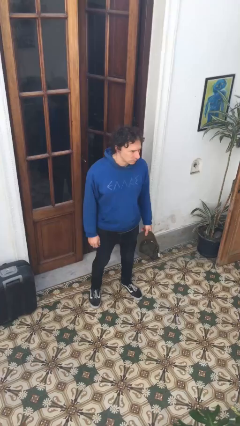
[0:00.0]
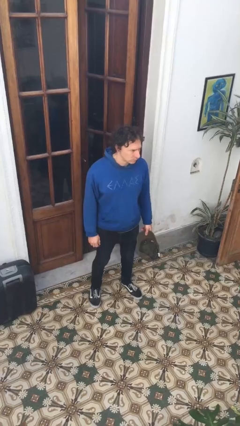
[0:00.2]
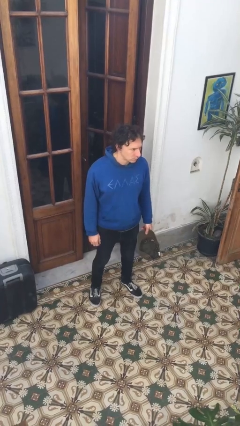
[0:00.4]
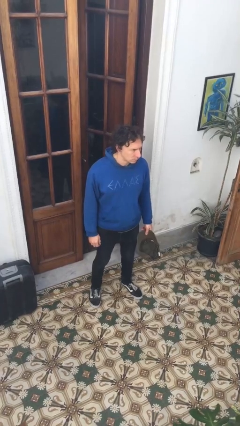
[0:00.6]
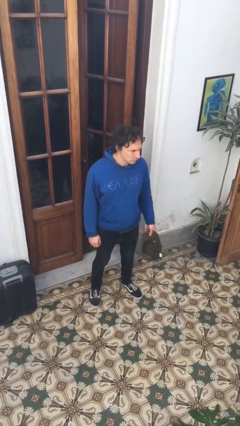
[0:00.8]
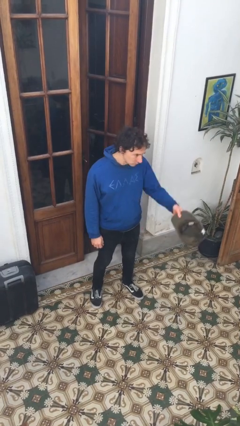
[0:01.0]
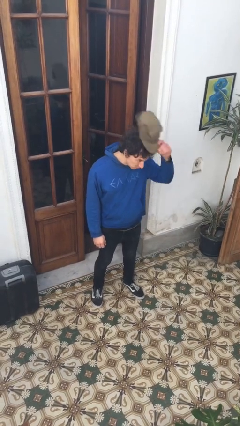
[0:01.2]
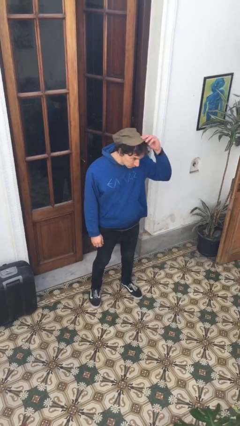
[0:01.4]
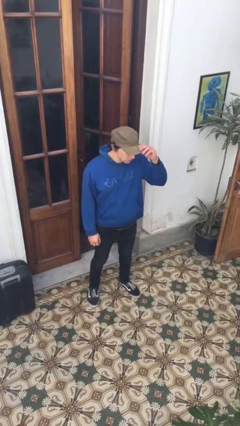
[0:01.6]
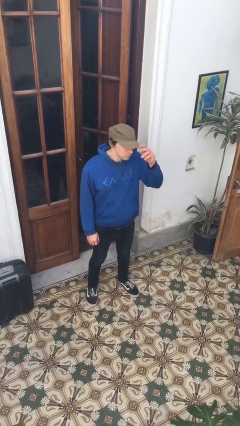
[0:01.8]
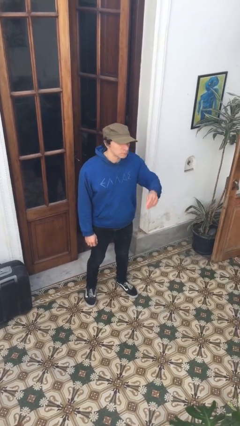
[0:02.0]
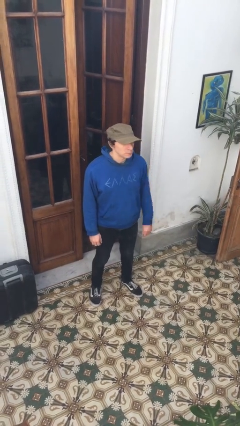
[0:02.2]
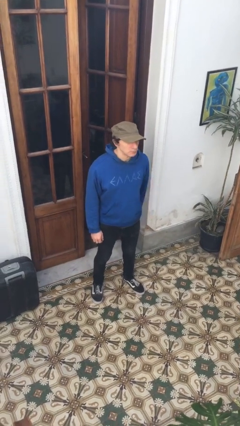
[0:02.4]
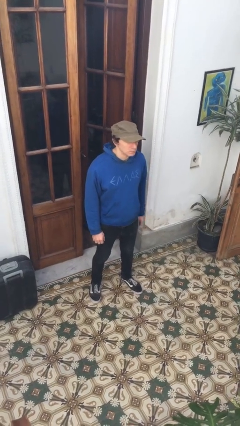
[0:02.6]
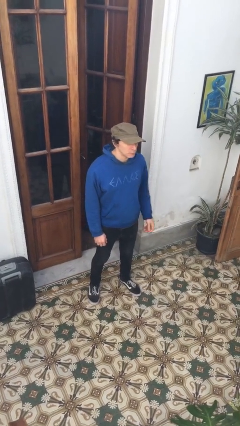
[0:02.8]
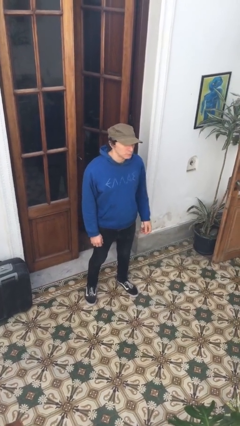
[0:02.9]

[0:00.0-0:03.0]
person puts on hat

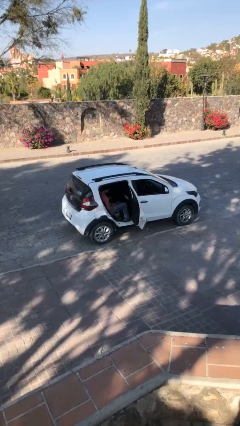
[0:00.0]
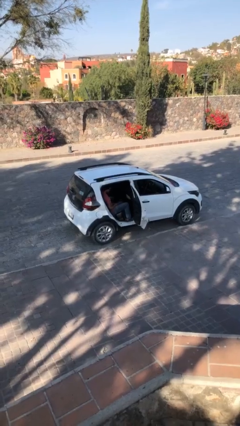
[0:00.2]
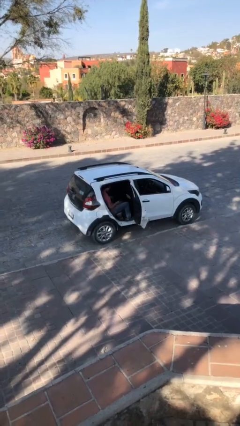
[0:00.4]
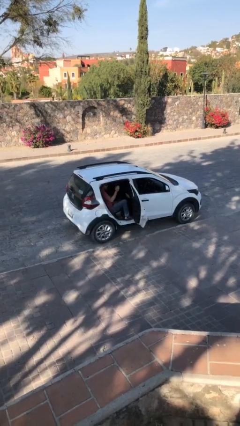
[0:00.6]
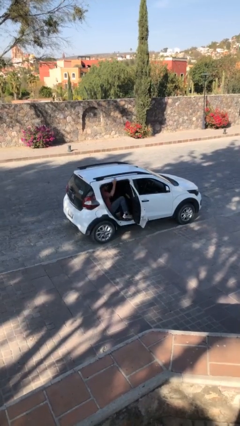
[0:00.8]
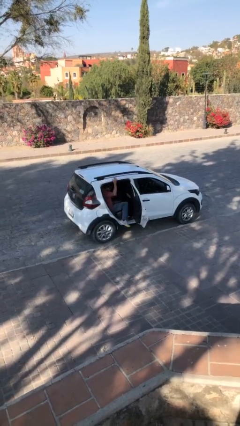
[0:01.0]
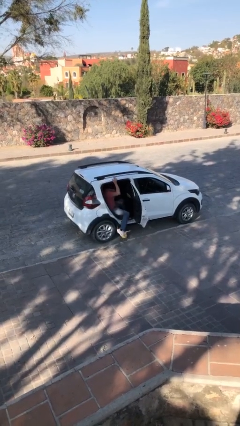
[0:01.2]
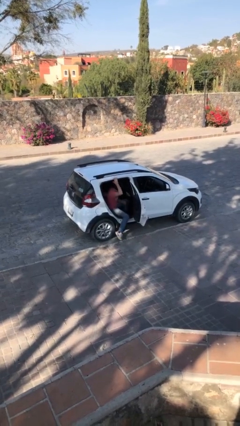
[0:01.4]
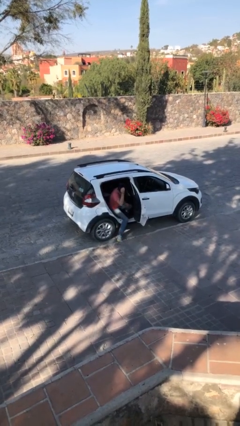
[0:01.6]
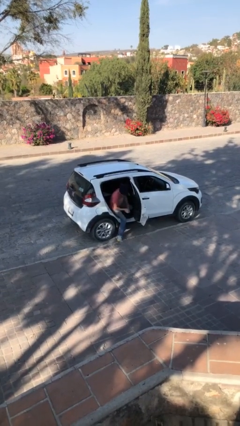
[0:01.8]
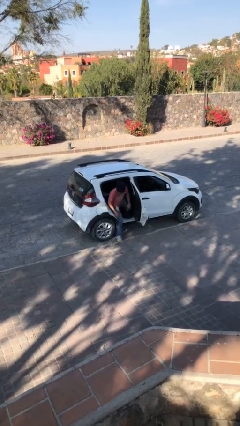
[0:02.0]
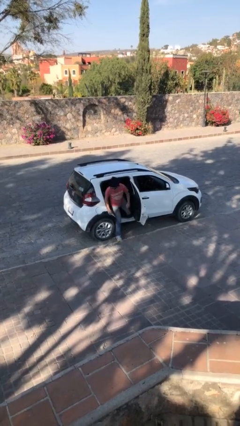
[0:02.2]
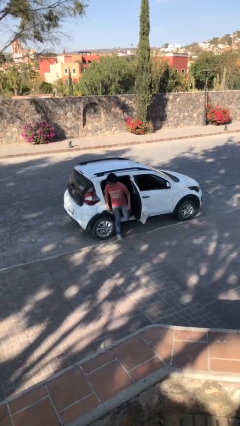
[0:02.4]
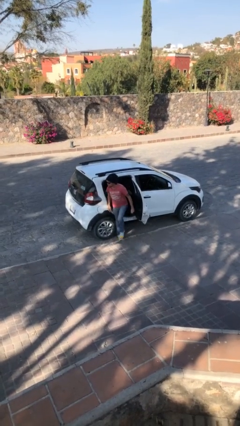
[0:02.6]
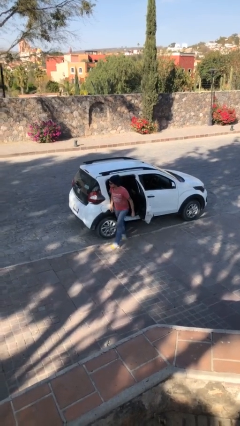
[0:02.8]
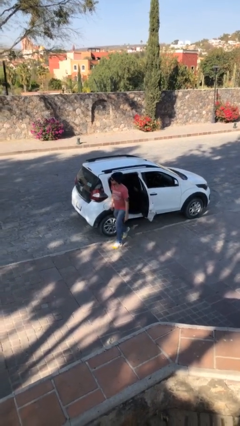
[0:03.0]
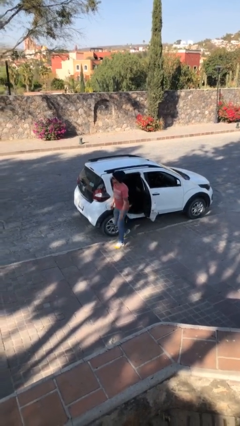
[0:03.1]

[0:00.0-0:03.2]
person exits car

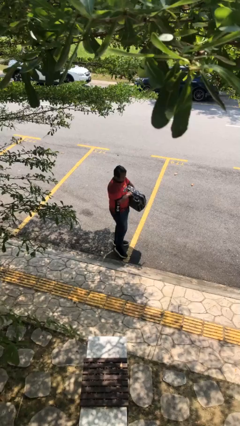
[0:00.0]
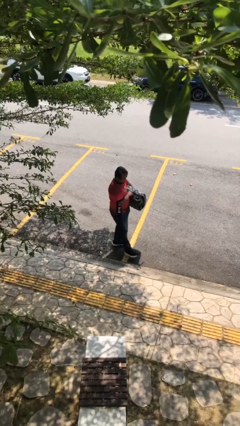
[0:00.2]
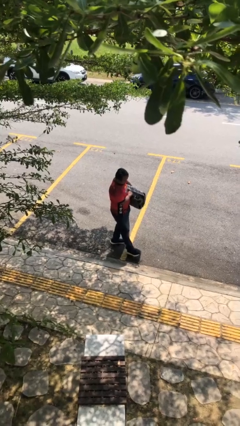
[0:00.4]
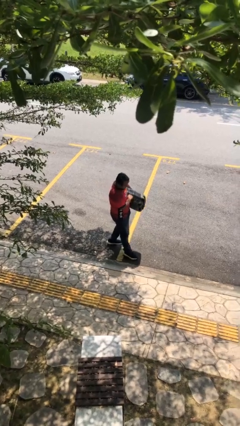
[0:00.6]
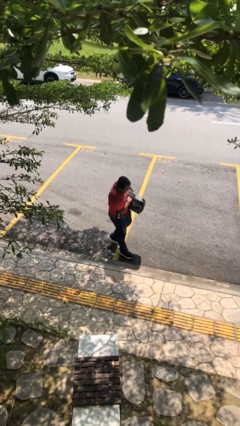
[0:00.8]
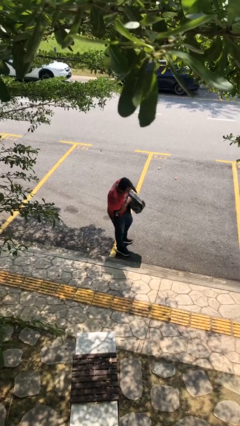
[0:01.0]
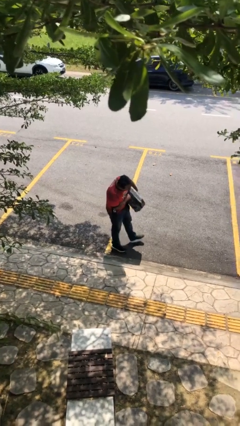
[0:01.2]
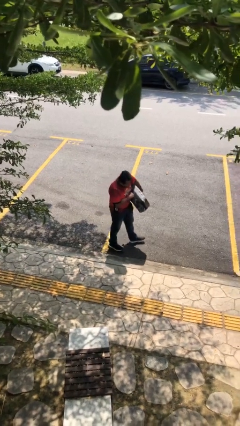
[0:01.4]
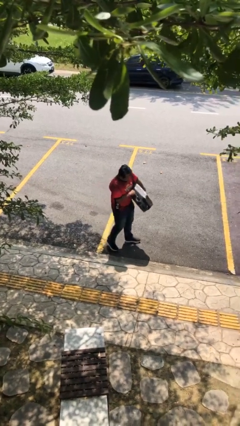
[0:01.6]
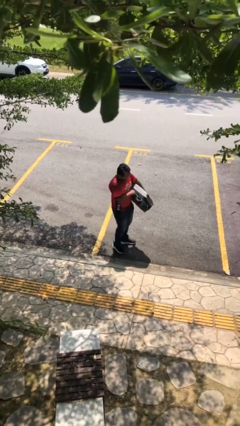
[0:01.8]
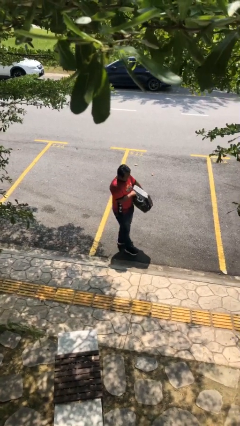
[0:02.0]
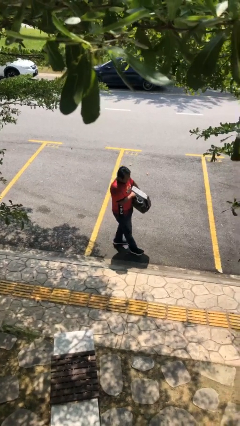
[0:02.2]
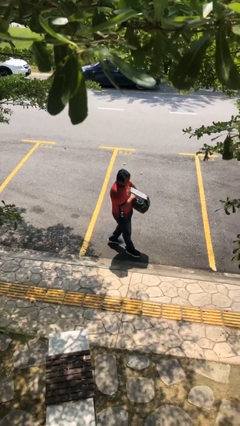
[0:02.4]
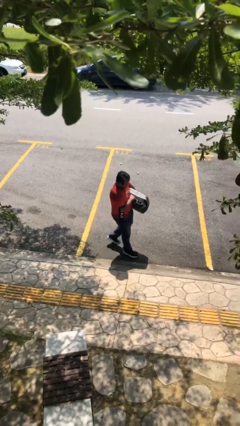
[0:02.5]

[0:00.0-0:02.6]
person carries heavy object

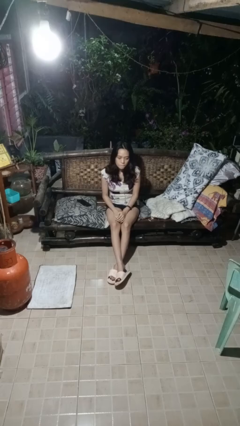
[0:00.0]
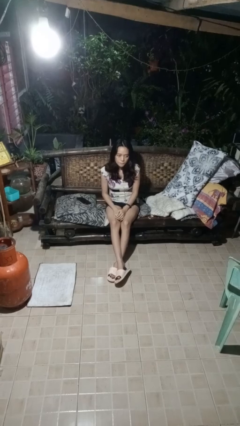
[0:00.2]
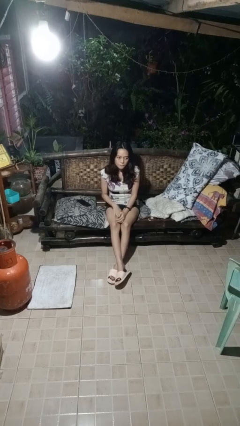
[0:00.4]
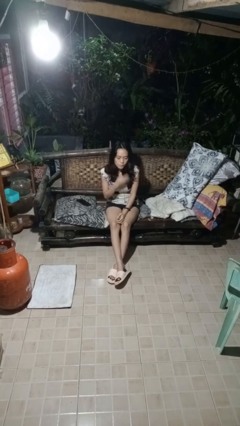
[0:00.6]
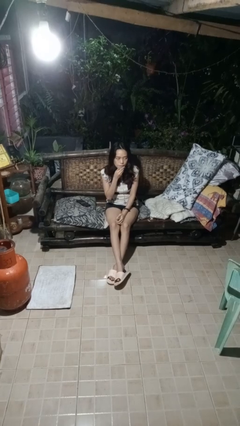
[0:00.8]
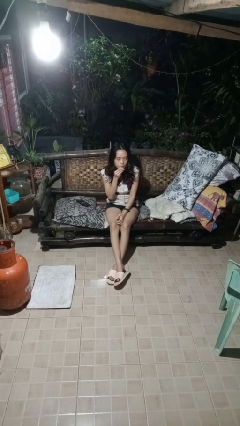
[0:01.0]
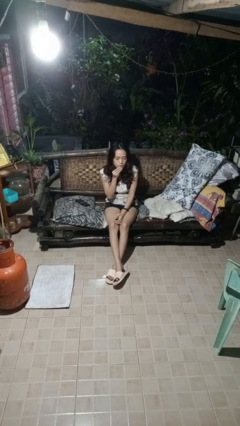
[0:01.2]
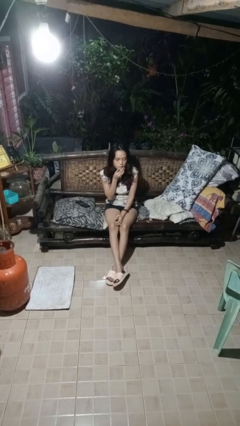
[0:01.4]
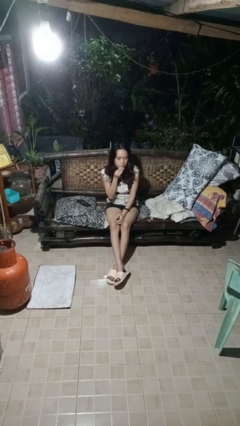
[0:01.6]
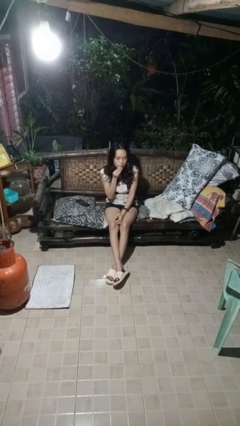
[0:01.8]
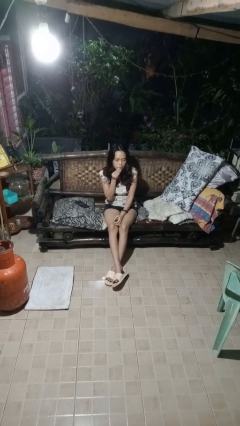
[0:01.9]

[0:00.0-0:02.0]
person strokes chin

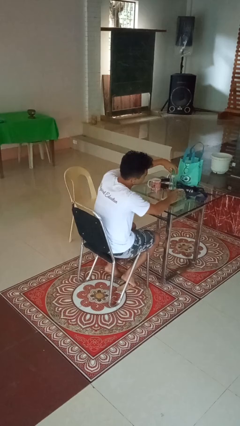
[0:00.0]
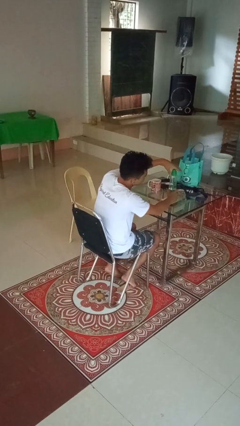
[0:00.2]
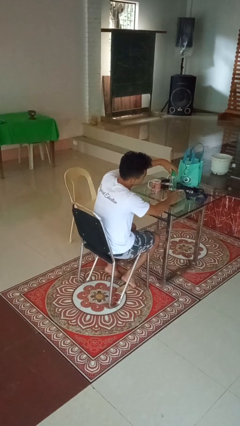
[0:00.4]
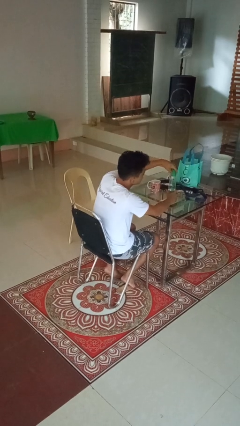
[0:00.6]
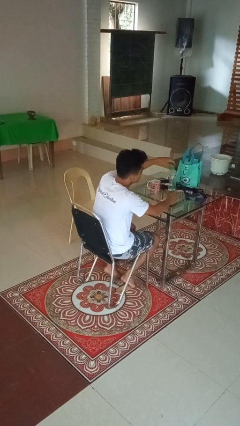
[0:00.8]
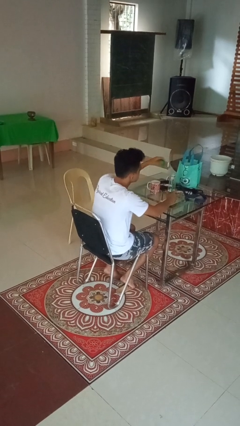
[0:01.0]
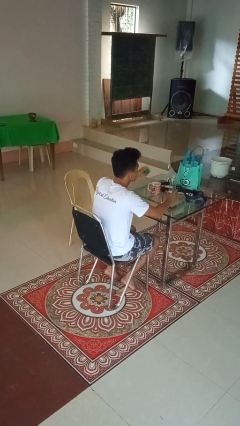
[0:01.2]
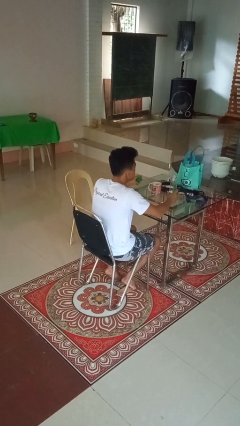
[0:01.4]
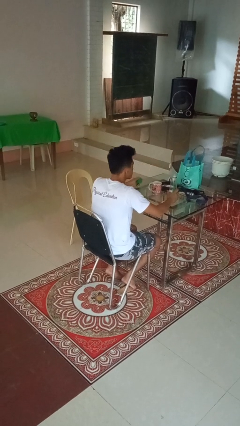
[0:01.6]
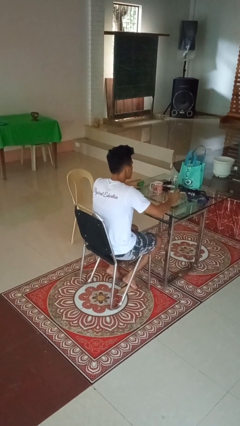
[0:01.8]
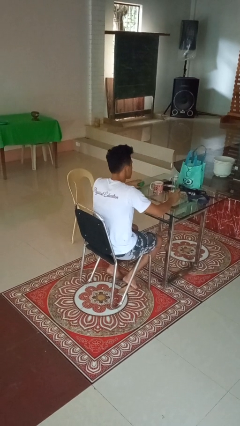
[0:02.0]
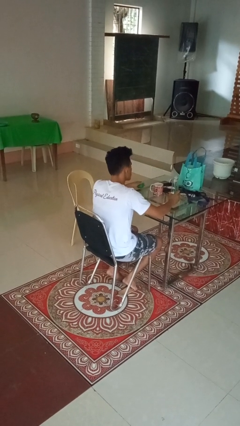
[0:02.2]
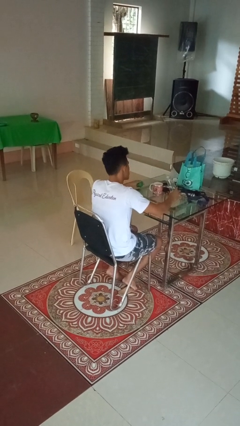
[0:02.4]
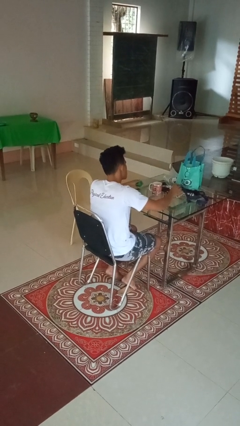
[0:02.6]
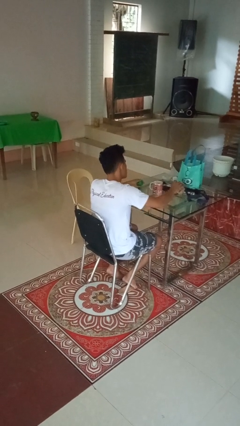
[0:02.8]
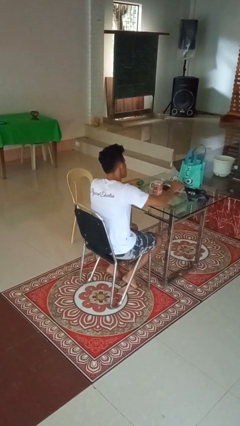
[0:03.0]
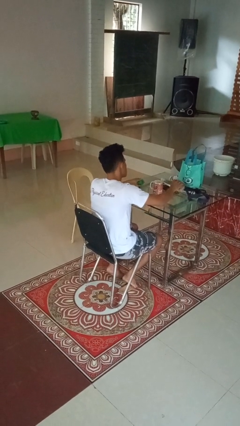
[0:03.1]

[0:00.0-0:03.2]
person unscrews lid from bottle

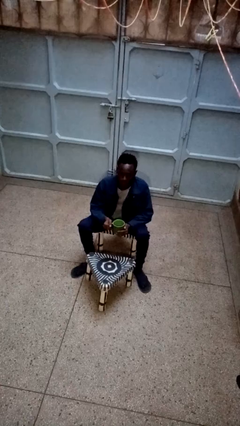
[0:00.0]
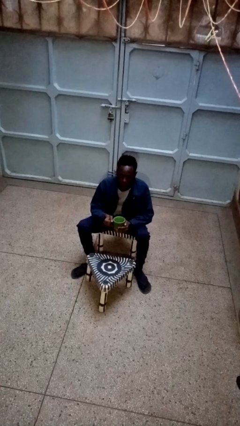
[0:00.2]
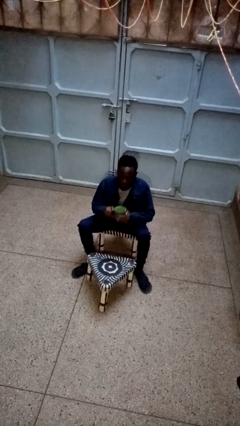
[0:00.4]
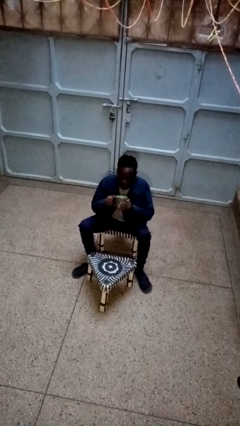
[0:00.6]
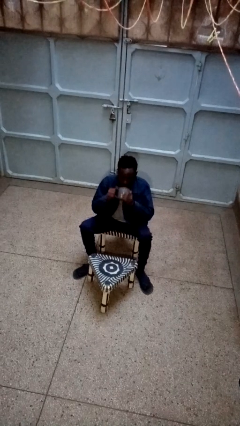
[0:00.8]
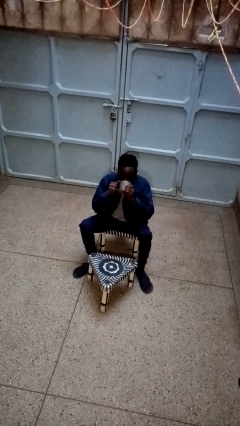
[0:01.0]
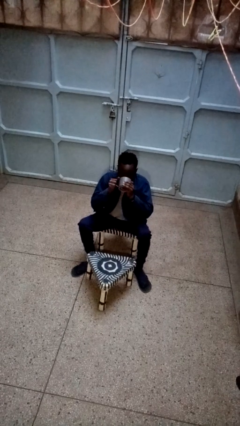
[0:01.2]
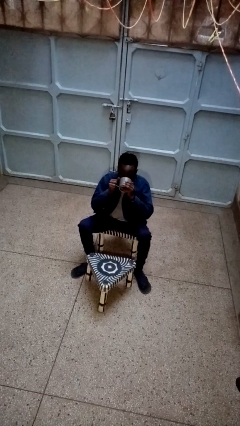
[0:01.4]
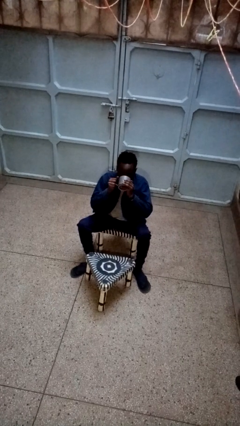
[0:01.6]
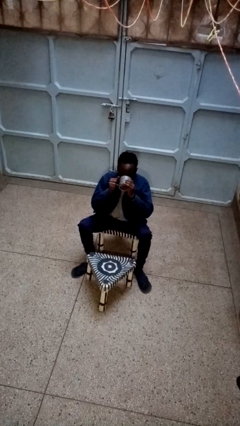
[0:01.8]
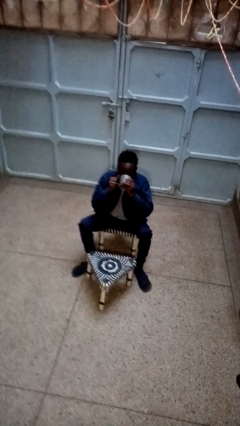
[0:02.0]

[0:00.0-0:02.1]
person drinks from mug

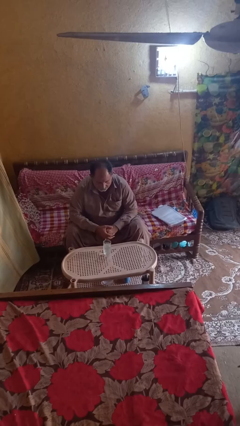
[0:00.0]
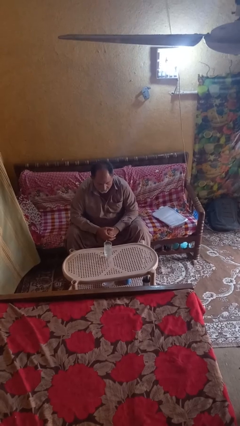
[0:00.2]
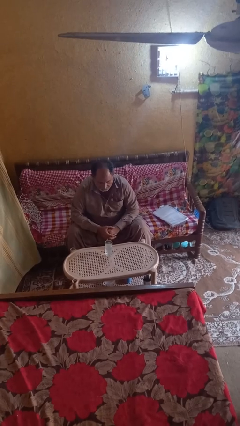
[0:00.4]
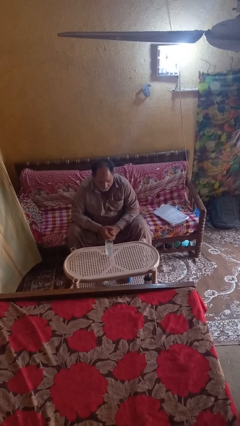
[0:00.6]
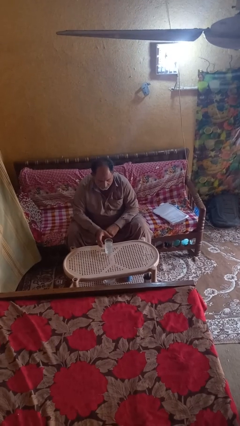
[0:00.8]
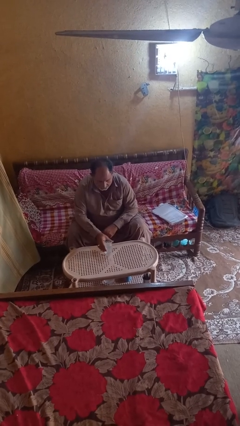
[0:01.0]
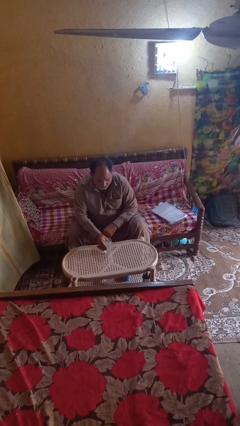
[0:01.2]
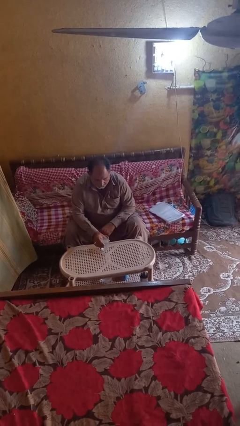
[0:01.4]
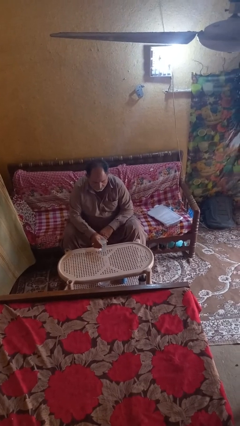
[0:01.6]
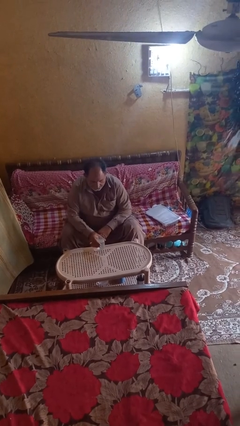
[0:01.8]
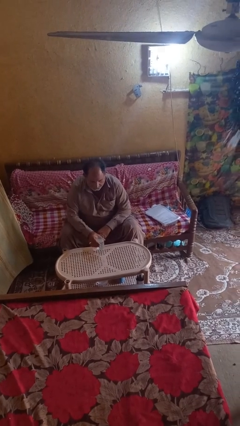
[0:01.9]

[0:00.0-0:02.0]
person picks up object from table
